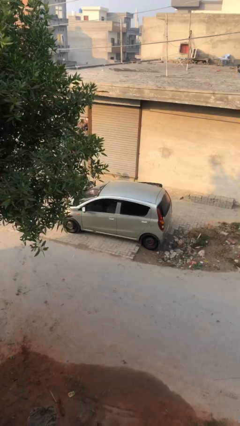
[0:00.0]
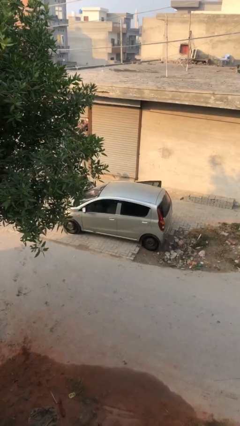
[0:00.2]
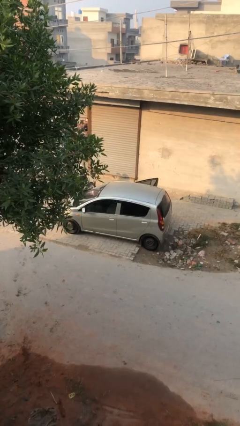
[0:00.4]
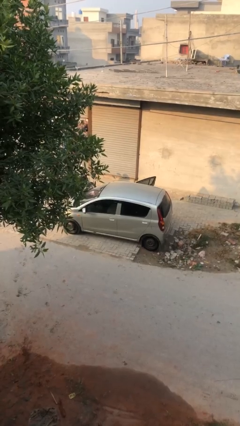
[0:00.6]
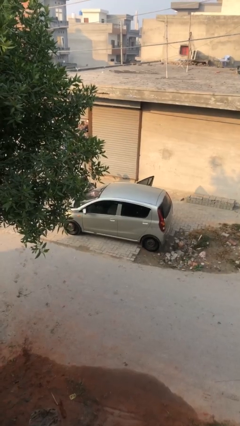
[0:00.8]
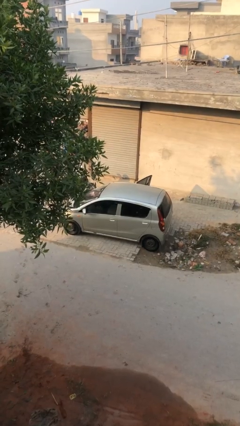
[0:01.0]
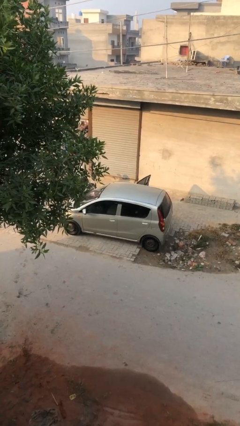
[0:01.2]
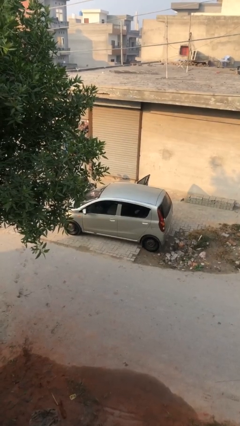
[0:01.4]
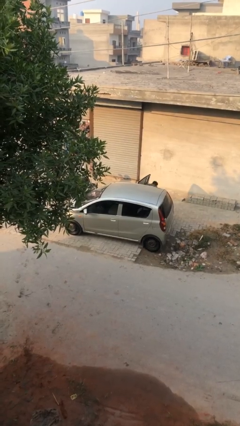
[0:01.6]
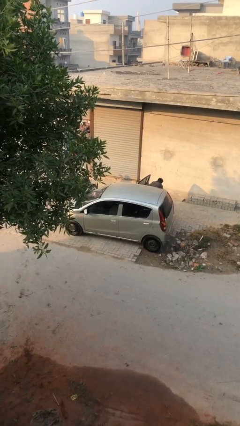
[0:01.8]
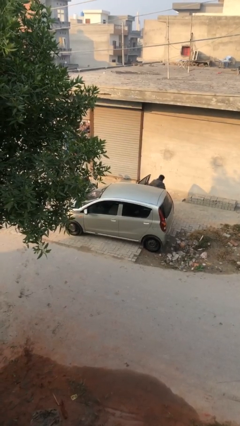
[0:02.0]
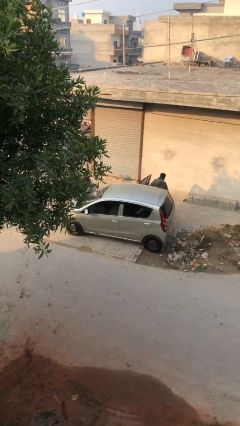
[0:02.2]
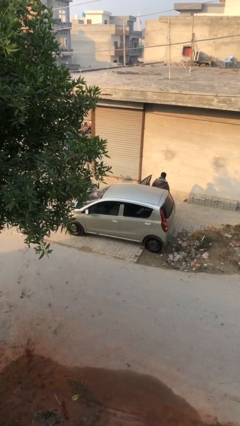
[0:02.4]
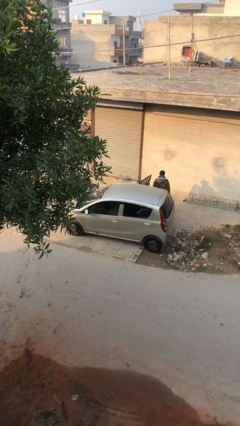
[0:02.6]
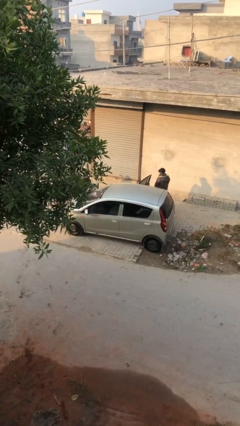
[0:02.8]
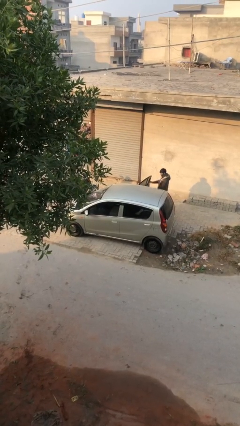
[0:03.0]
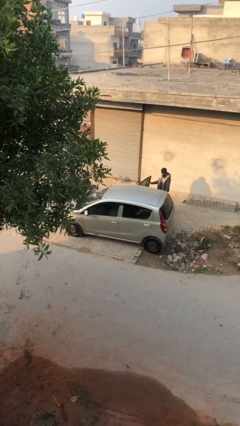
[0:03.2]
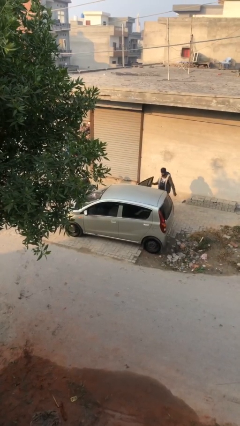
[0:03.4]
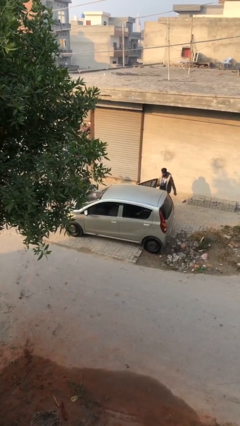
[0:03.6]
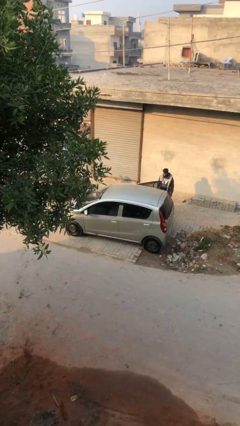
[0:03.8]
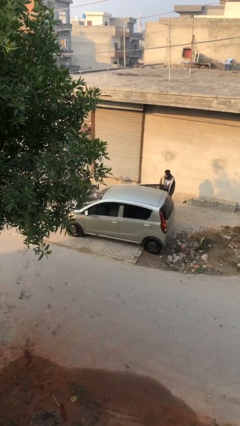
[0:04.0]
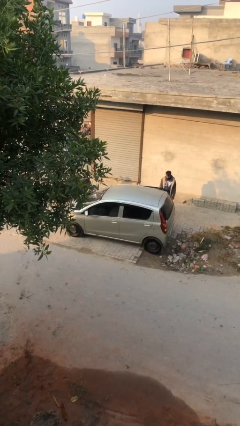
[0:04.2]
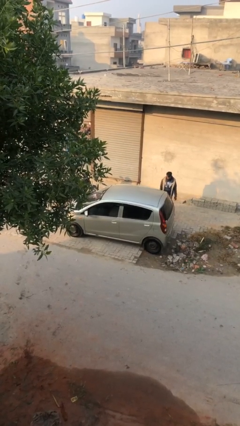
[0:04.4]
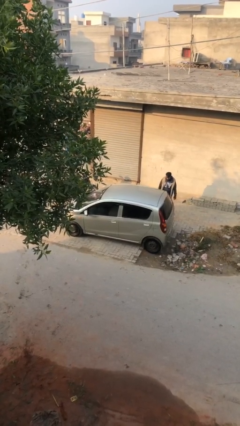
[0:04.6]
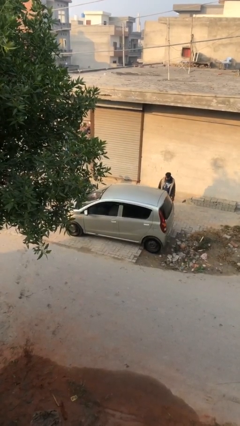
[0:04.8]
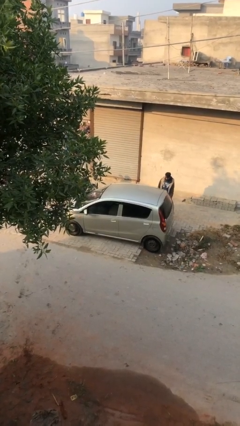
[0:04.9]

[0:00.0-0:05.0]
car drops off person

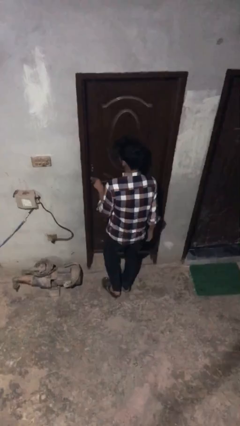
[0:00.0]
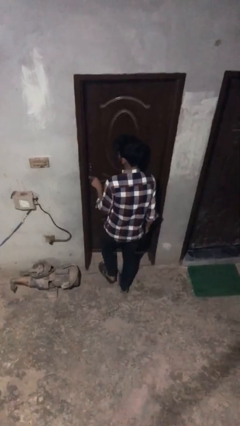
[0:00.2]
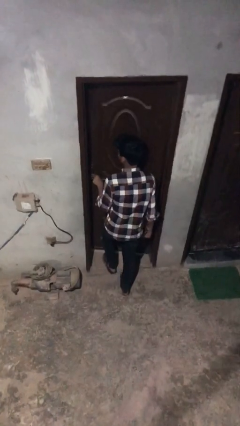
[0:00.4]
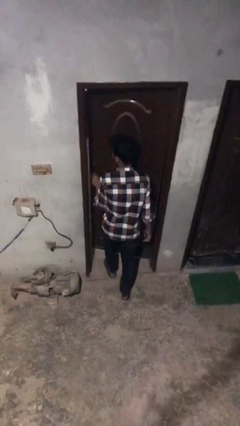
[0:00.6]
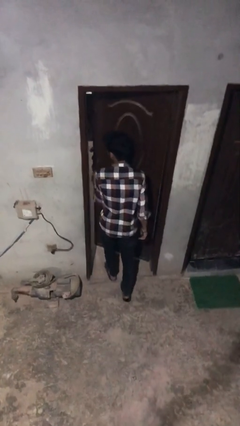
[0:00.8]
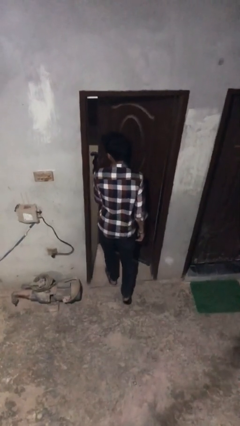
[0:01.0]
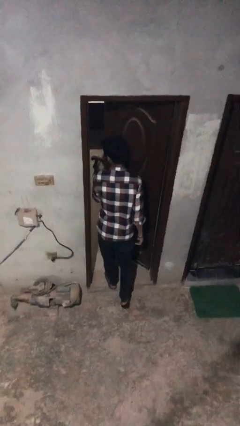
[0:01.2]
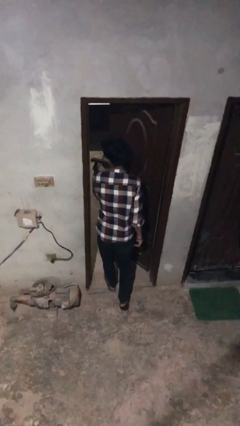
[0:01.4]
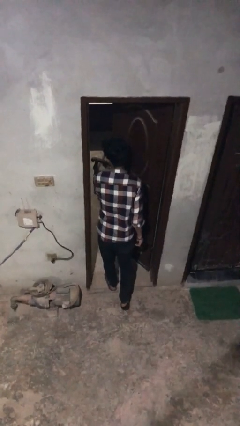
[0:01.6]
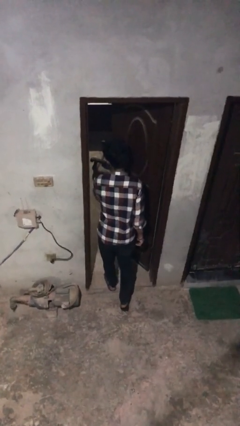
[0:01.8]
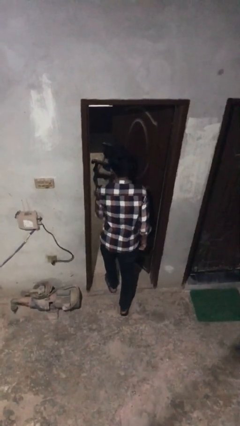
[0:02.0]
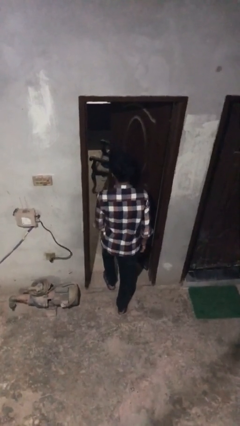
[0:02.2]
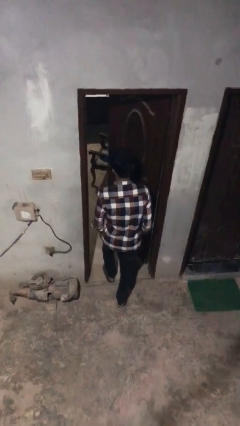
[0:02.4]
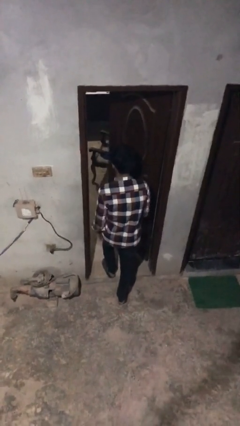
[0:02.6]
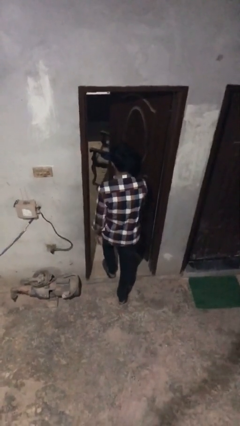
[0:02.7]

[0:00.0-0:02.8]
person opens facility door

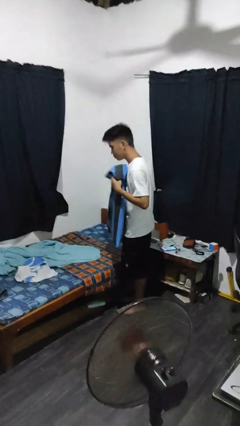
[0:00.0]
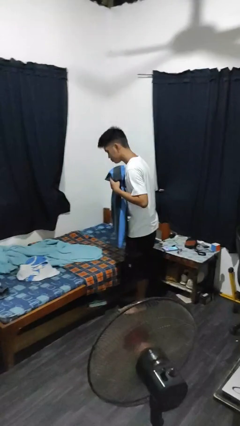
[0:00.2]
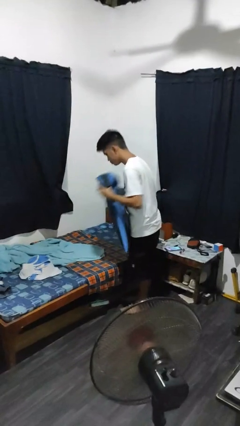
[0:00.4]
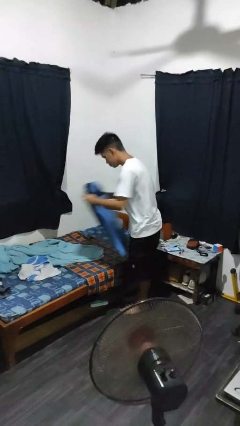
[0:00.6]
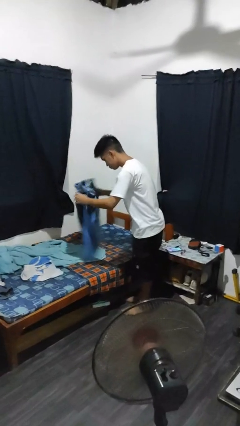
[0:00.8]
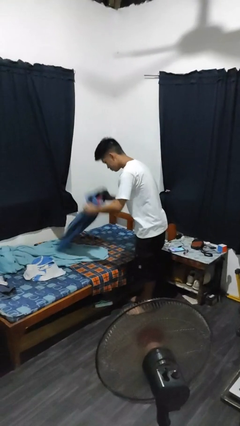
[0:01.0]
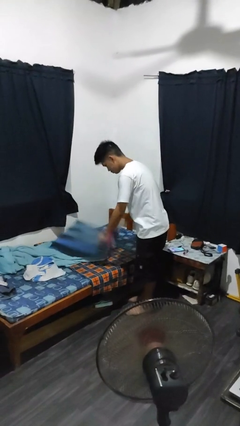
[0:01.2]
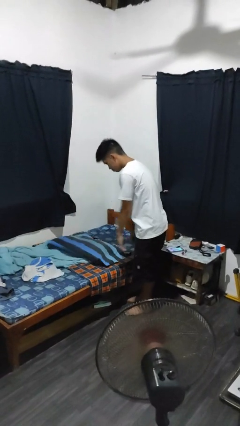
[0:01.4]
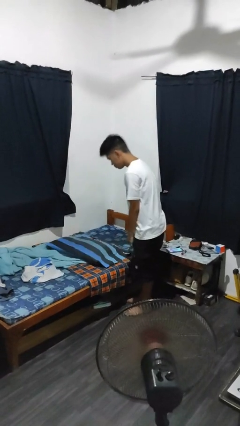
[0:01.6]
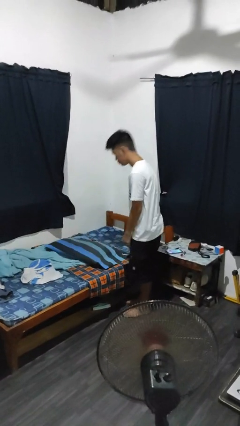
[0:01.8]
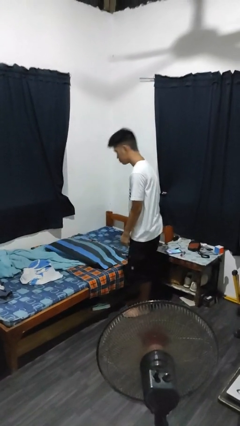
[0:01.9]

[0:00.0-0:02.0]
person puts down object on bed

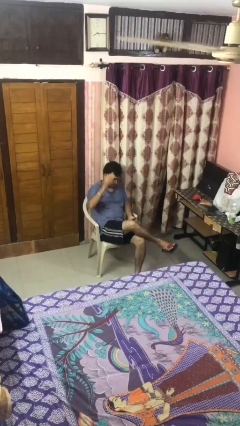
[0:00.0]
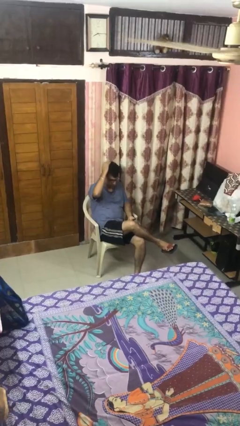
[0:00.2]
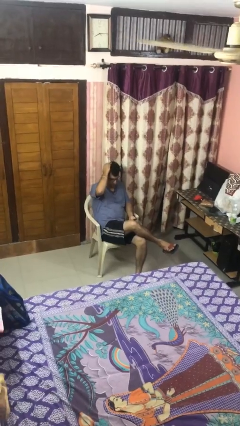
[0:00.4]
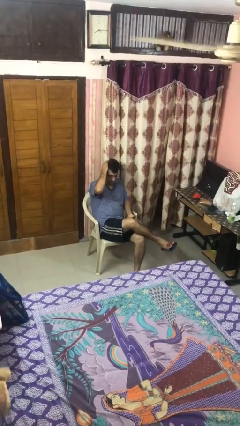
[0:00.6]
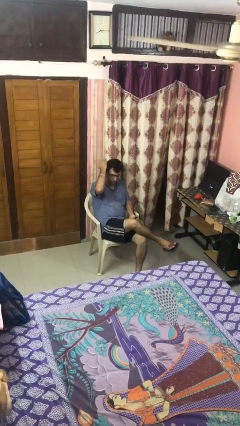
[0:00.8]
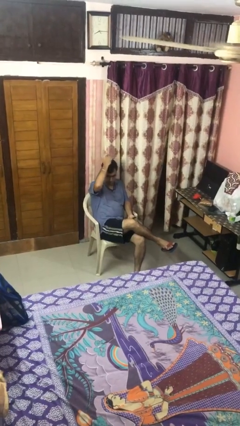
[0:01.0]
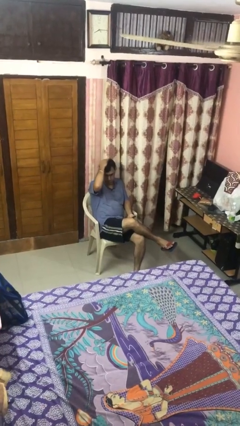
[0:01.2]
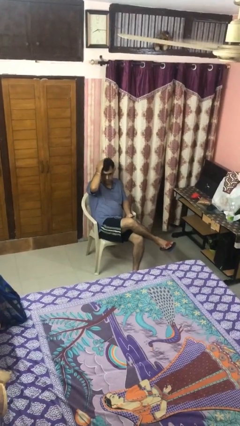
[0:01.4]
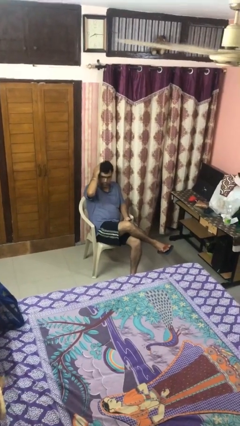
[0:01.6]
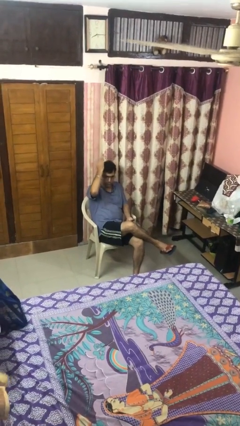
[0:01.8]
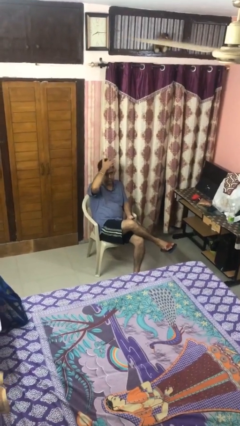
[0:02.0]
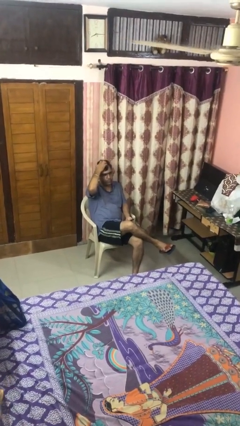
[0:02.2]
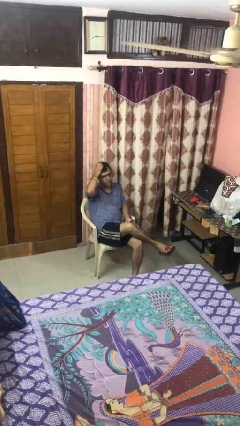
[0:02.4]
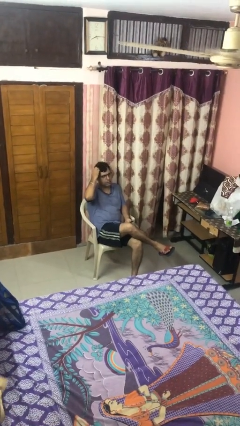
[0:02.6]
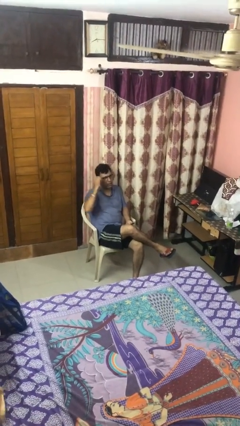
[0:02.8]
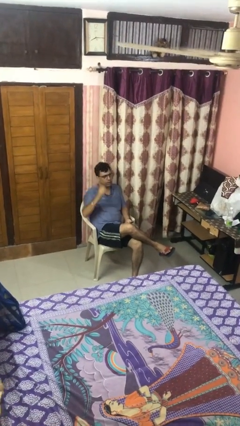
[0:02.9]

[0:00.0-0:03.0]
person strokes hair

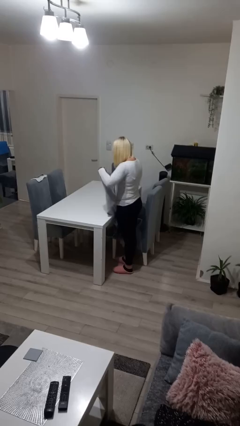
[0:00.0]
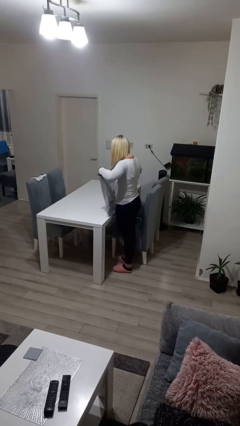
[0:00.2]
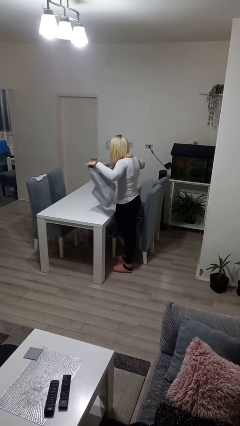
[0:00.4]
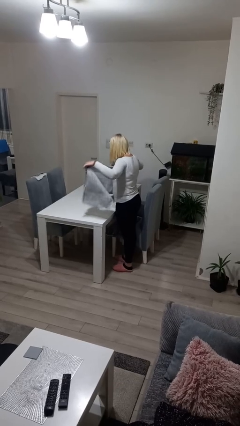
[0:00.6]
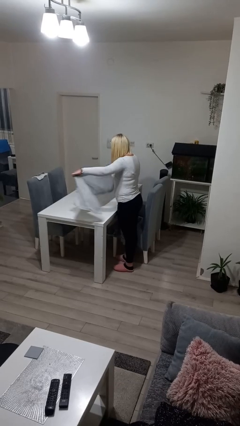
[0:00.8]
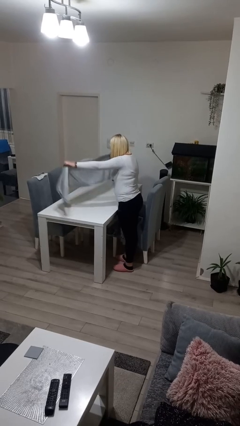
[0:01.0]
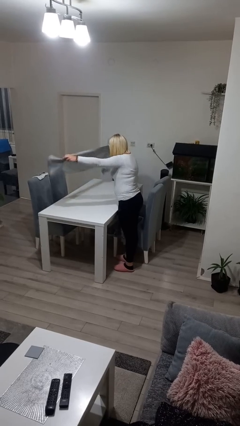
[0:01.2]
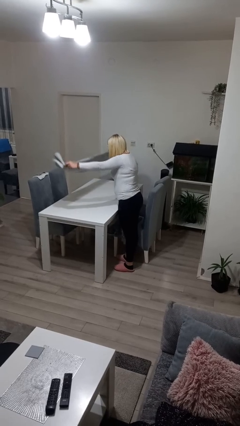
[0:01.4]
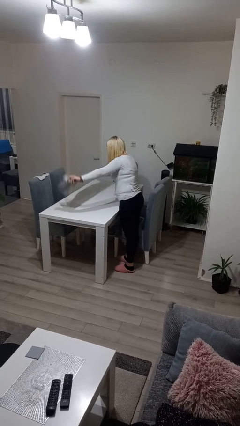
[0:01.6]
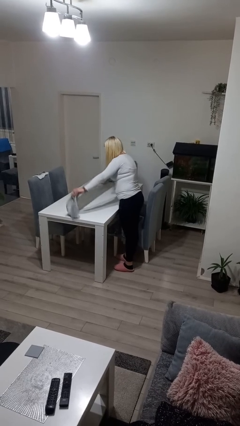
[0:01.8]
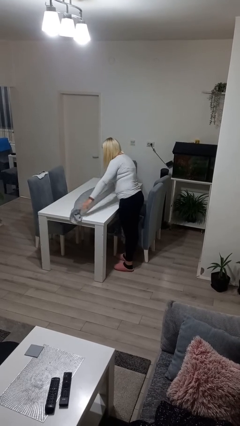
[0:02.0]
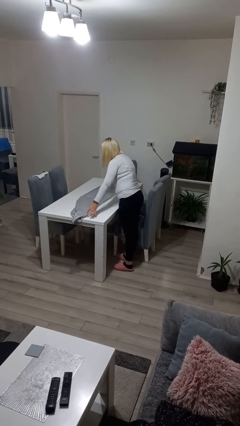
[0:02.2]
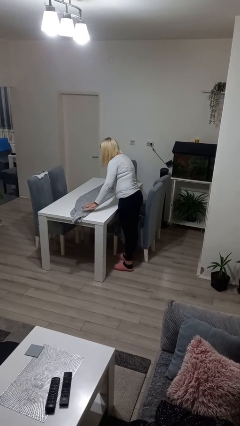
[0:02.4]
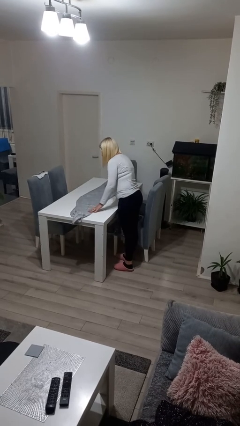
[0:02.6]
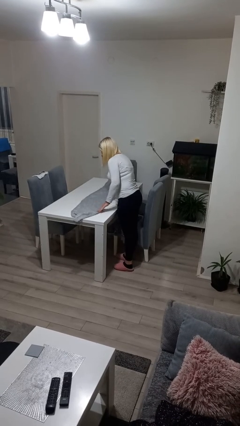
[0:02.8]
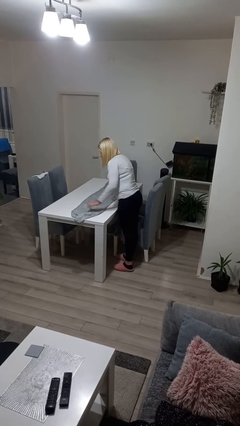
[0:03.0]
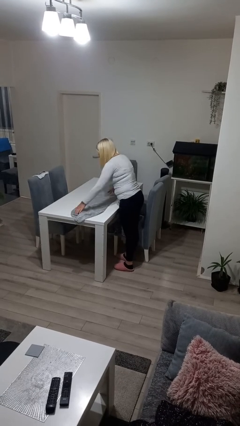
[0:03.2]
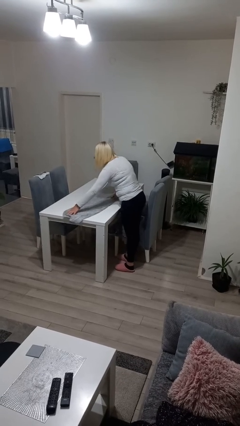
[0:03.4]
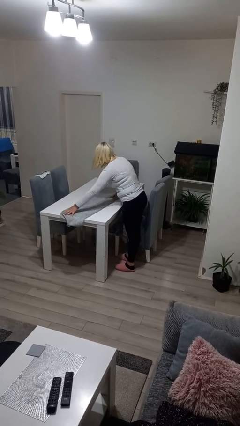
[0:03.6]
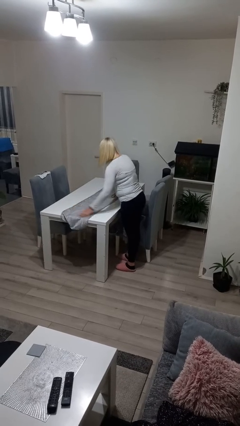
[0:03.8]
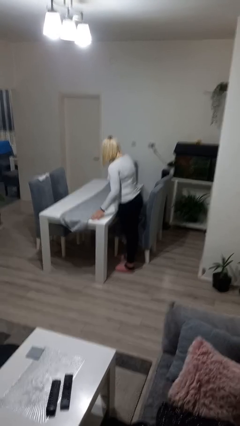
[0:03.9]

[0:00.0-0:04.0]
person spreads tablecloth

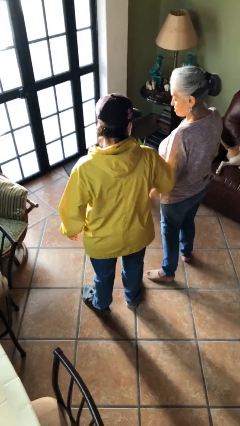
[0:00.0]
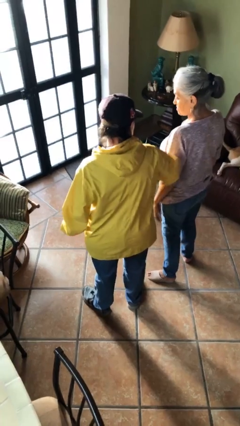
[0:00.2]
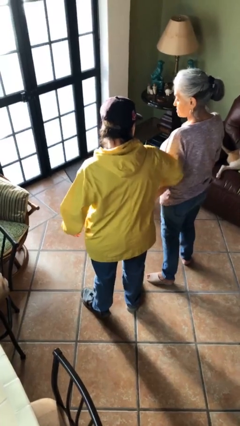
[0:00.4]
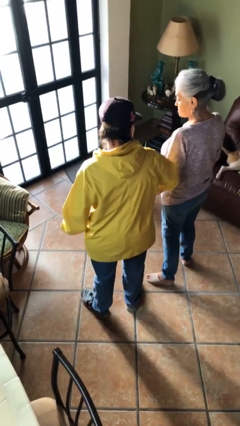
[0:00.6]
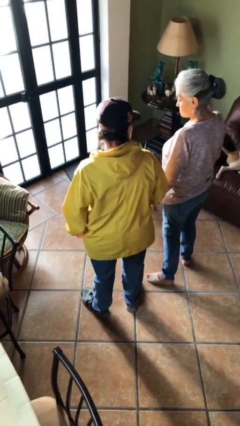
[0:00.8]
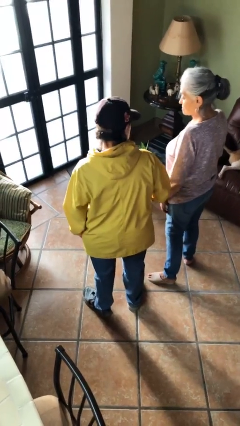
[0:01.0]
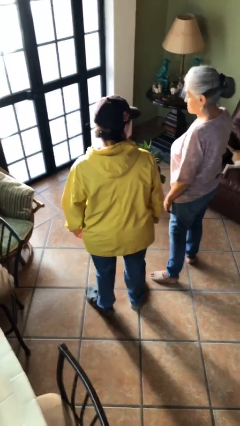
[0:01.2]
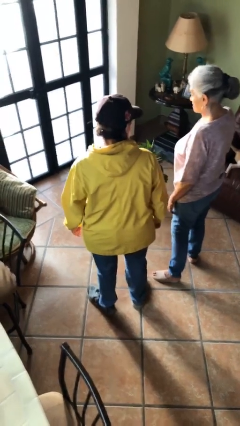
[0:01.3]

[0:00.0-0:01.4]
person nudges person with elbow
